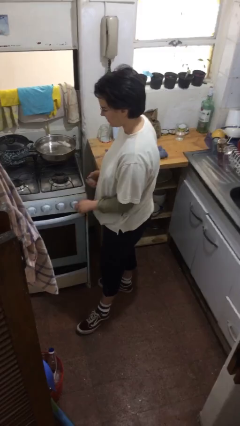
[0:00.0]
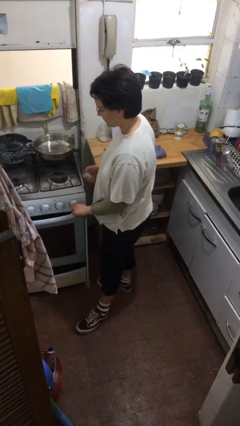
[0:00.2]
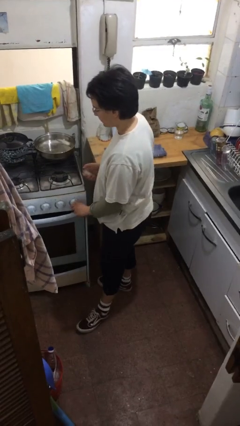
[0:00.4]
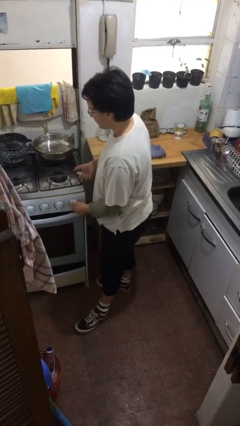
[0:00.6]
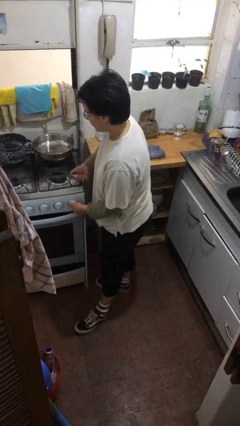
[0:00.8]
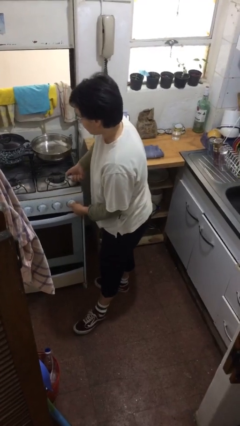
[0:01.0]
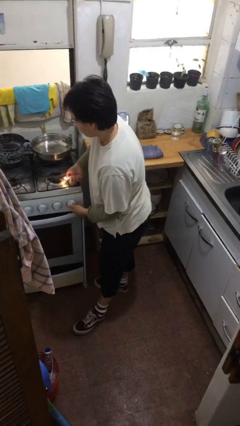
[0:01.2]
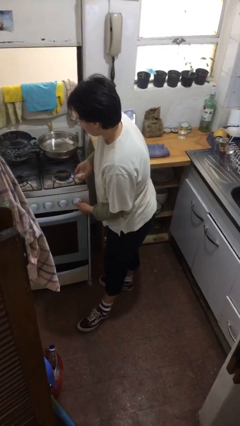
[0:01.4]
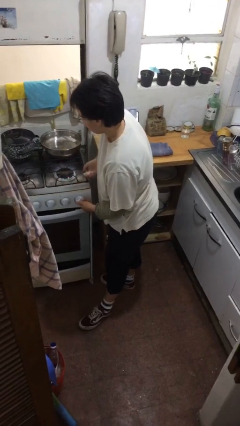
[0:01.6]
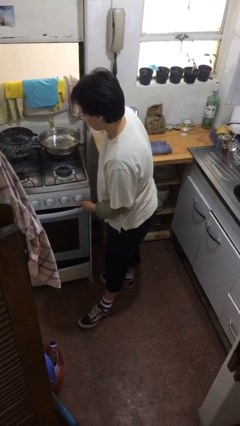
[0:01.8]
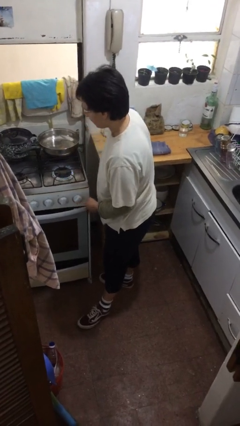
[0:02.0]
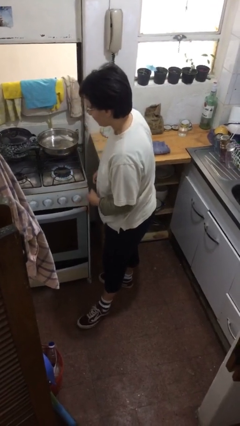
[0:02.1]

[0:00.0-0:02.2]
person turns on stovetop

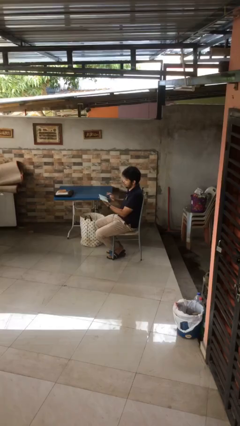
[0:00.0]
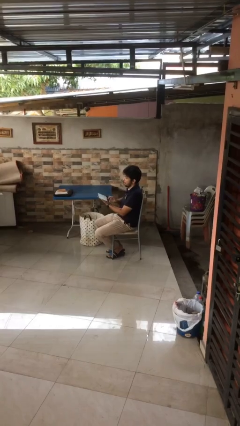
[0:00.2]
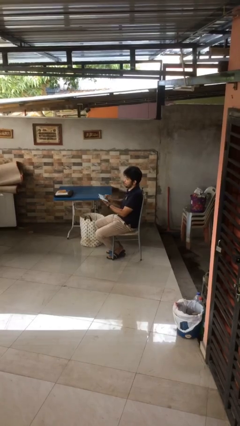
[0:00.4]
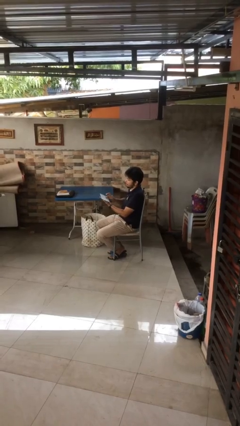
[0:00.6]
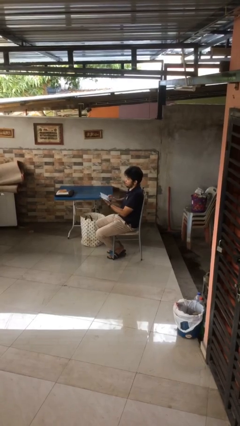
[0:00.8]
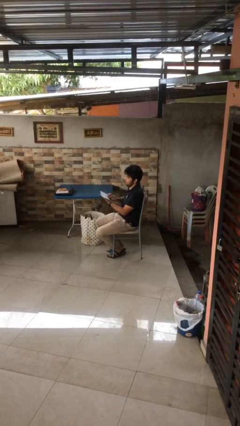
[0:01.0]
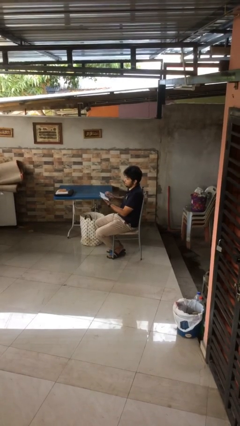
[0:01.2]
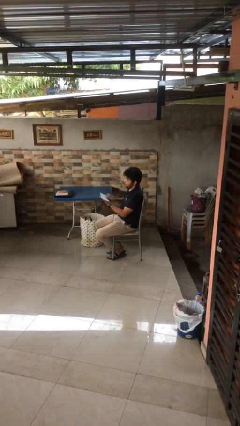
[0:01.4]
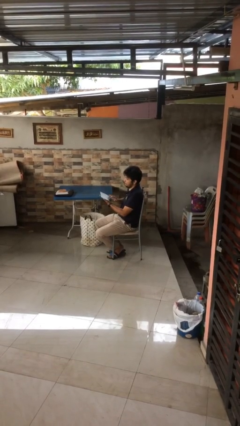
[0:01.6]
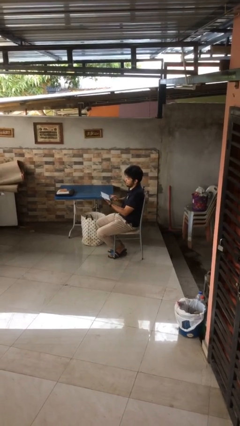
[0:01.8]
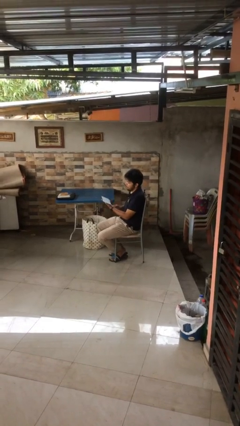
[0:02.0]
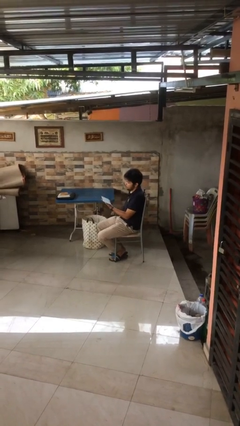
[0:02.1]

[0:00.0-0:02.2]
person interacts with tablet

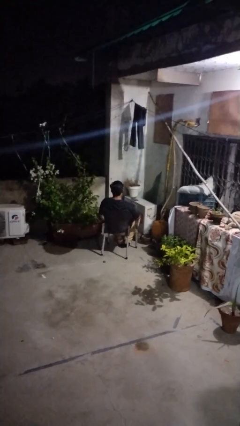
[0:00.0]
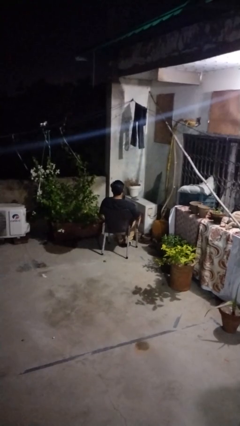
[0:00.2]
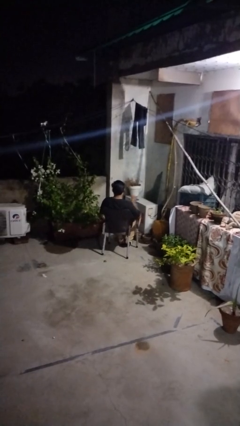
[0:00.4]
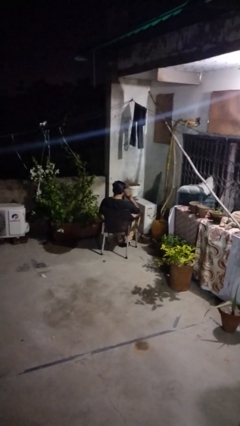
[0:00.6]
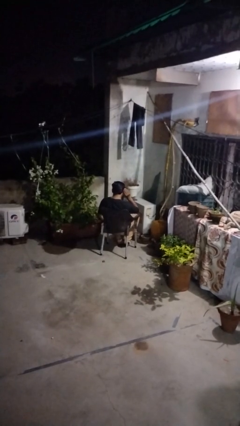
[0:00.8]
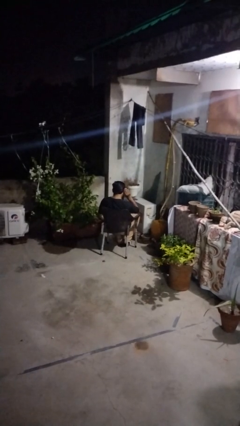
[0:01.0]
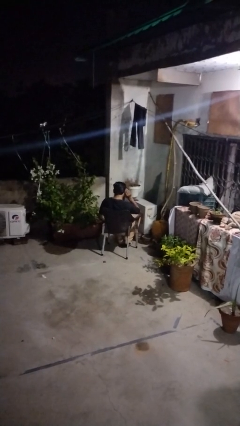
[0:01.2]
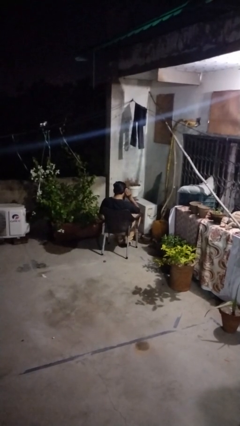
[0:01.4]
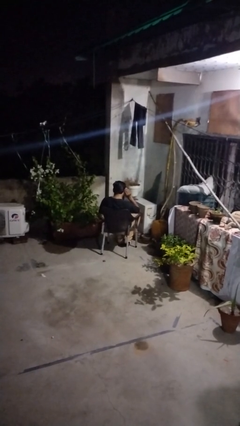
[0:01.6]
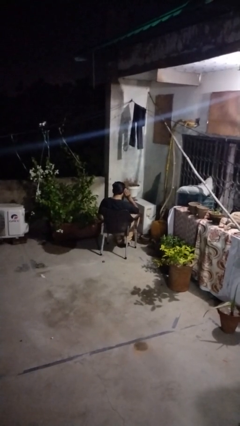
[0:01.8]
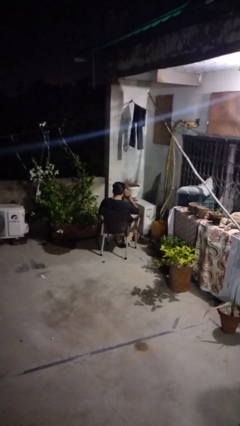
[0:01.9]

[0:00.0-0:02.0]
person gestures listen closely

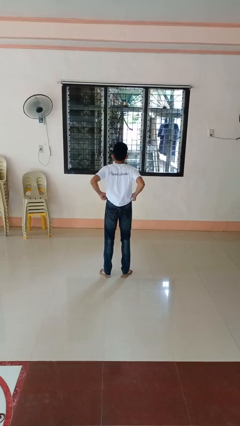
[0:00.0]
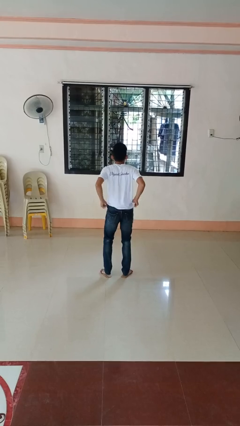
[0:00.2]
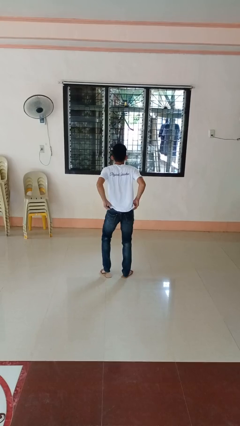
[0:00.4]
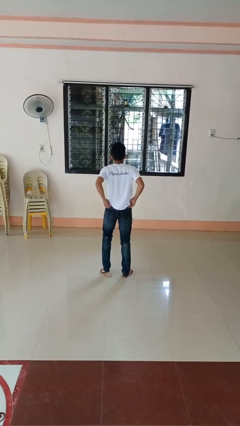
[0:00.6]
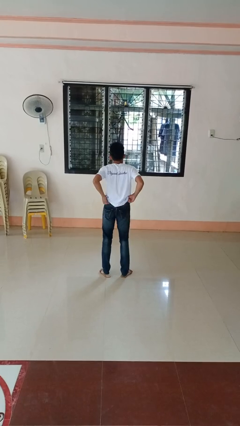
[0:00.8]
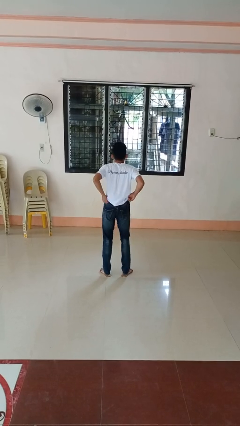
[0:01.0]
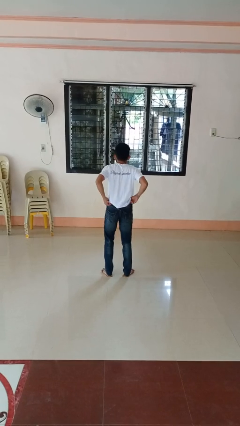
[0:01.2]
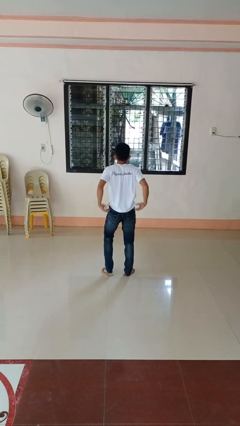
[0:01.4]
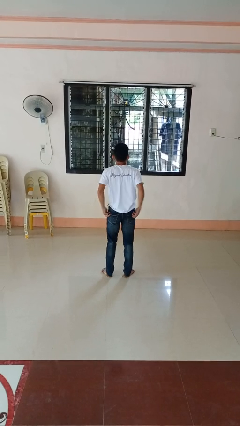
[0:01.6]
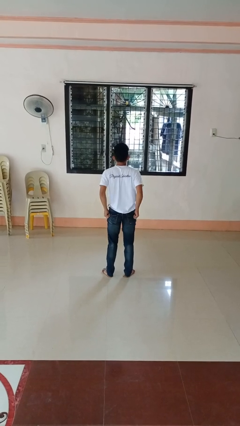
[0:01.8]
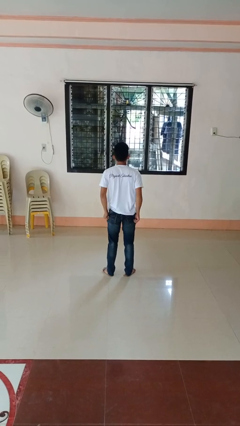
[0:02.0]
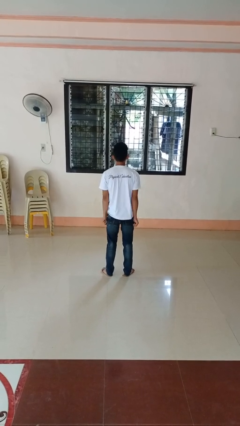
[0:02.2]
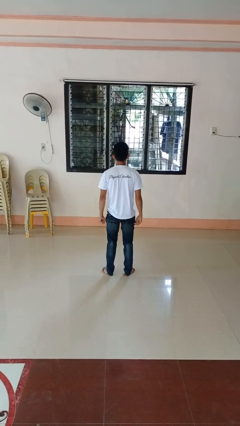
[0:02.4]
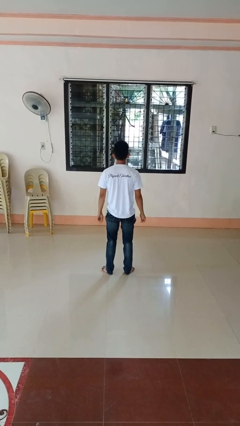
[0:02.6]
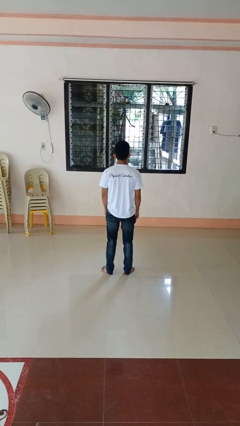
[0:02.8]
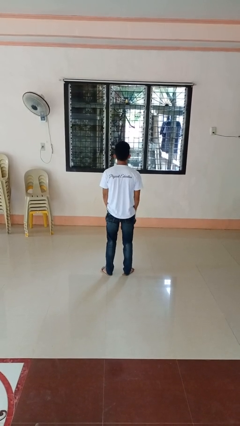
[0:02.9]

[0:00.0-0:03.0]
person hikes up pants

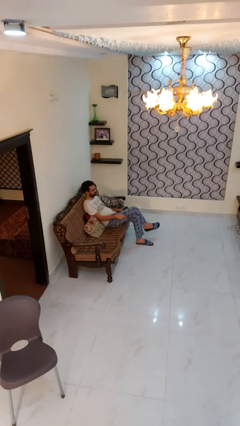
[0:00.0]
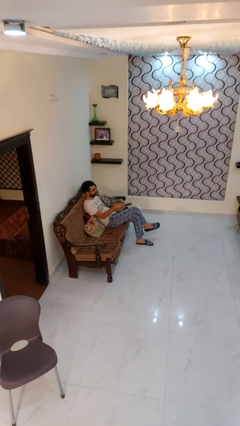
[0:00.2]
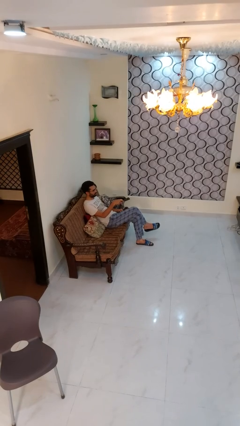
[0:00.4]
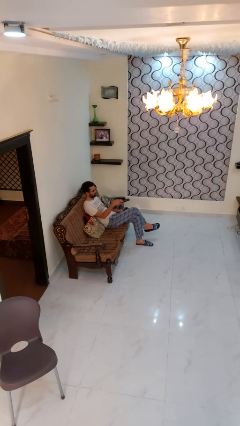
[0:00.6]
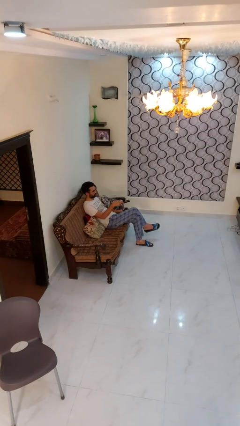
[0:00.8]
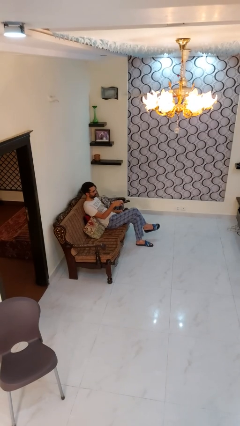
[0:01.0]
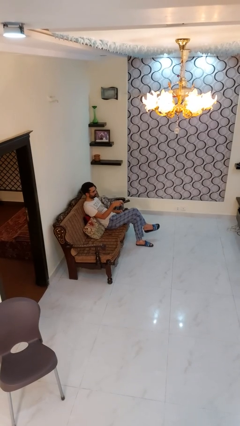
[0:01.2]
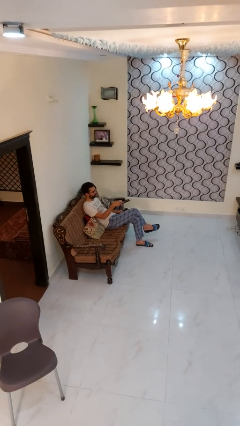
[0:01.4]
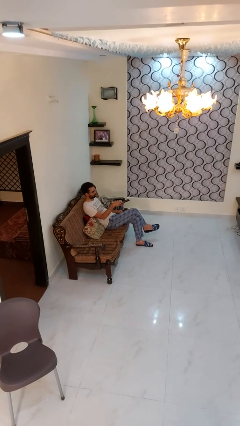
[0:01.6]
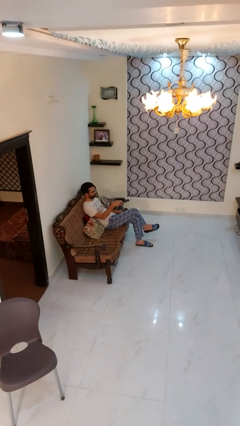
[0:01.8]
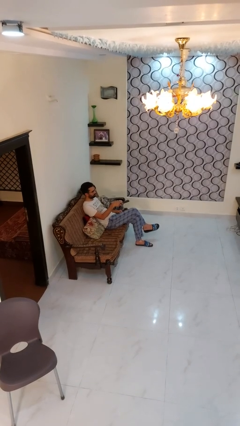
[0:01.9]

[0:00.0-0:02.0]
person uses television remote

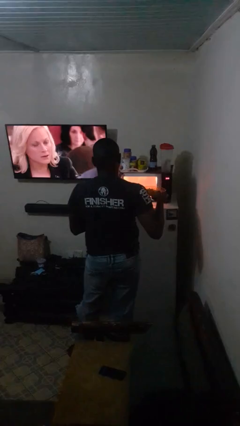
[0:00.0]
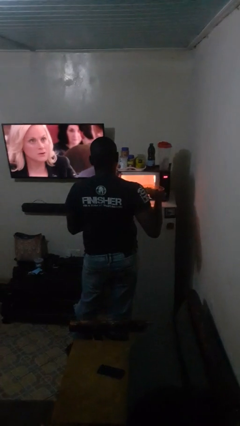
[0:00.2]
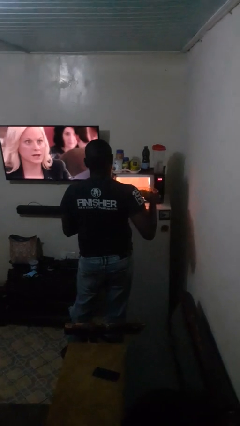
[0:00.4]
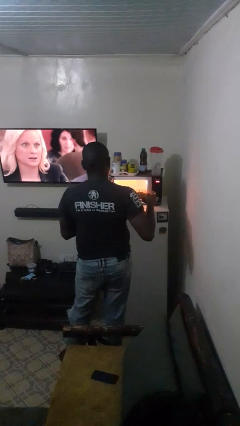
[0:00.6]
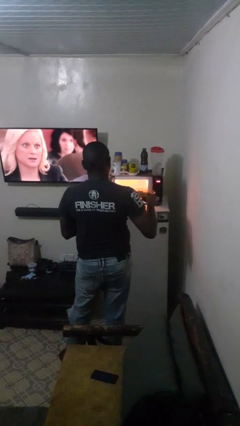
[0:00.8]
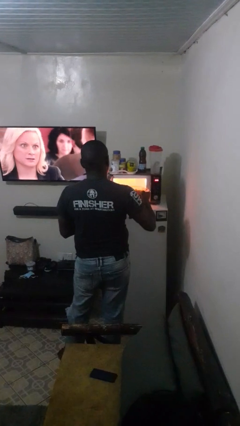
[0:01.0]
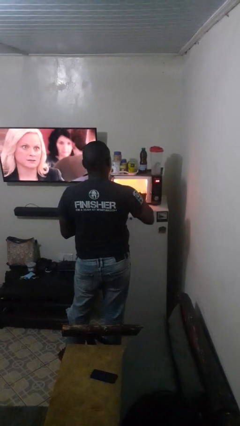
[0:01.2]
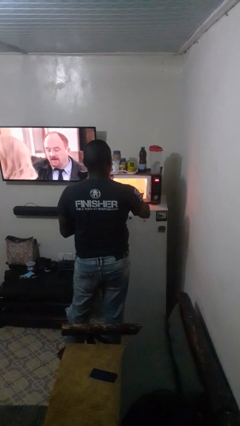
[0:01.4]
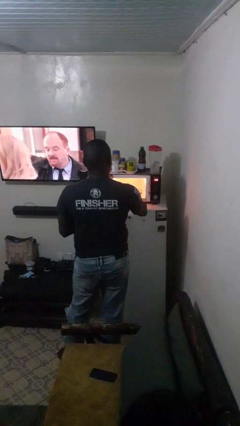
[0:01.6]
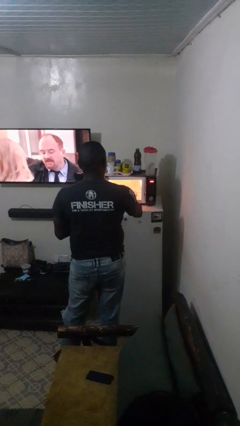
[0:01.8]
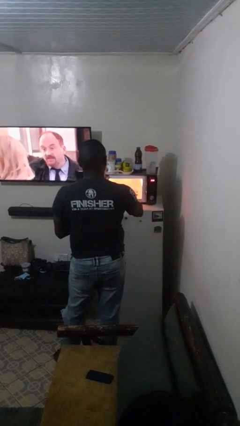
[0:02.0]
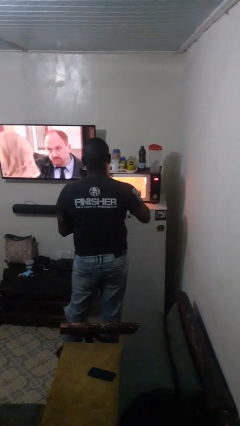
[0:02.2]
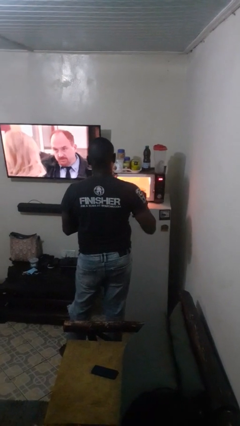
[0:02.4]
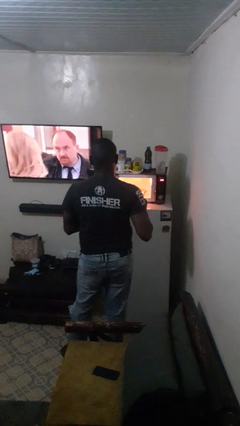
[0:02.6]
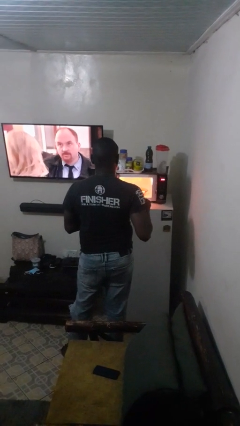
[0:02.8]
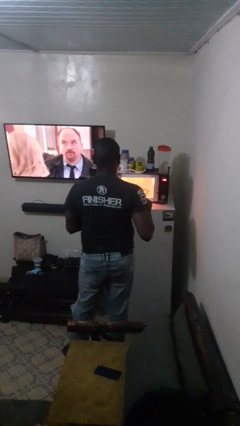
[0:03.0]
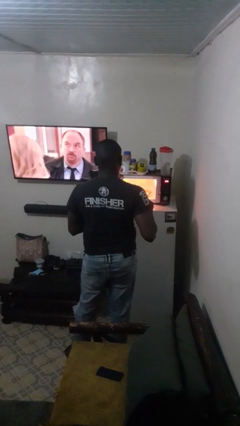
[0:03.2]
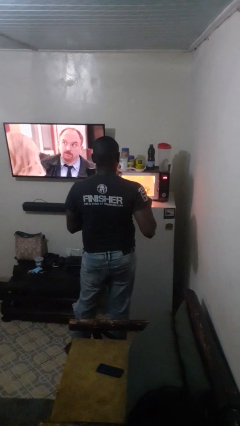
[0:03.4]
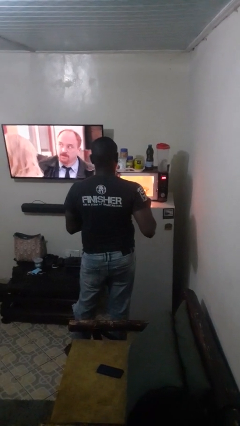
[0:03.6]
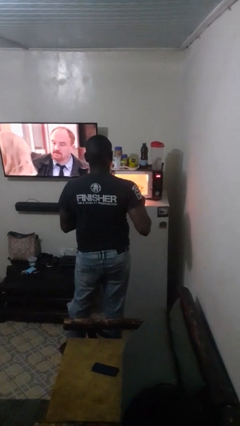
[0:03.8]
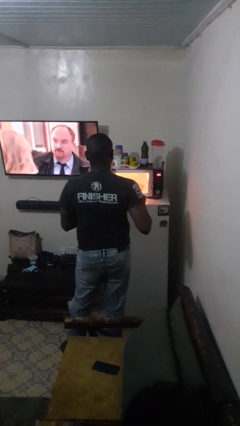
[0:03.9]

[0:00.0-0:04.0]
person puts object into microwave

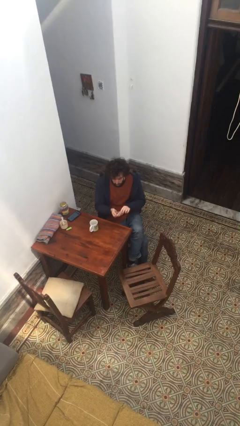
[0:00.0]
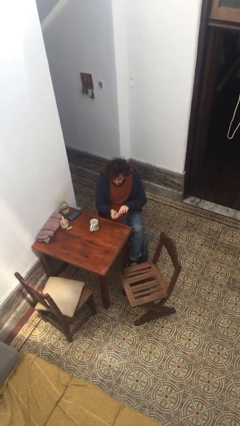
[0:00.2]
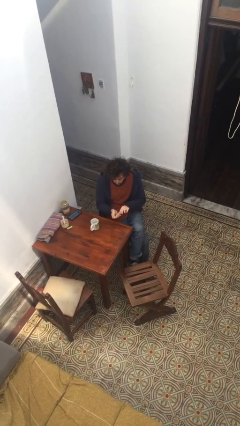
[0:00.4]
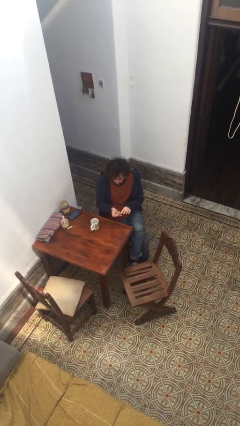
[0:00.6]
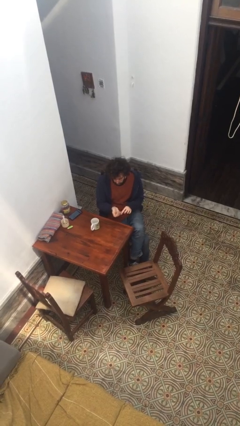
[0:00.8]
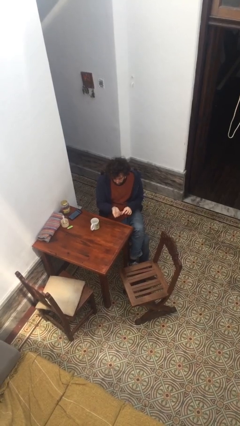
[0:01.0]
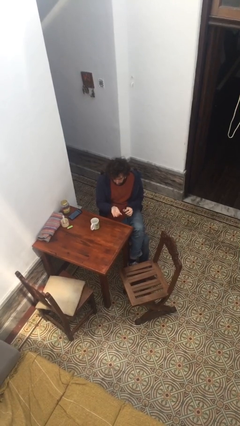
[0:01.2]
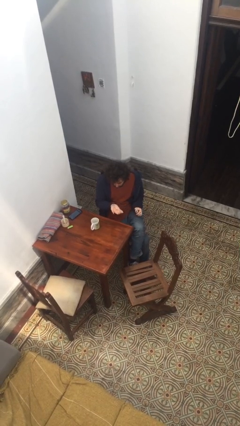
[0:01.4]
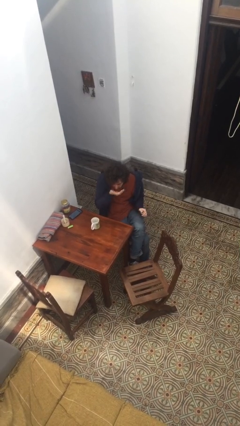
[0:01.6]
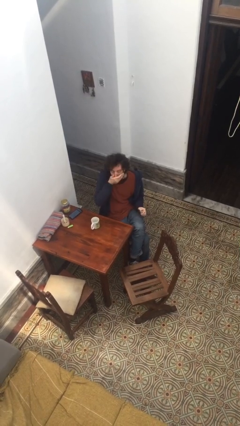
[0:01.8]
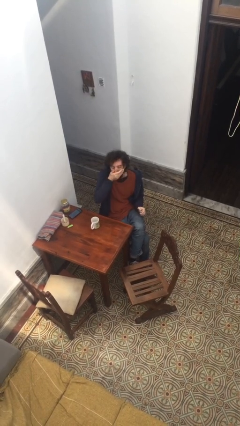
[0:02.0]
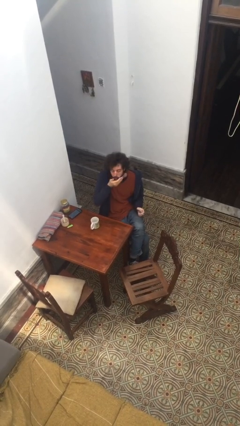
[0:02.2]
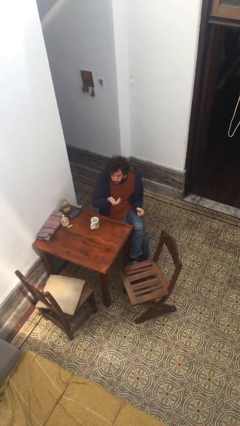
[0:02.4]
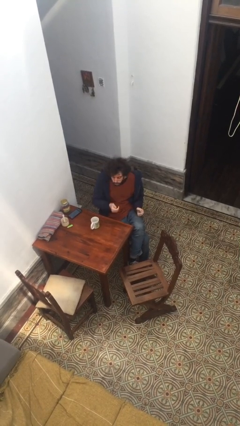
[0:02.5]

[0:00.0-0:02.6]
person takes medicine pills
